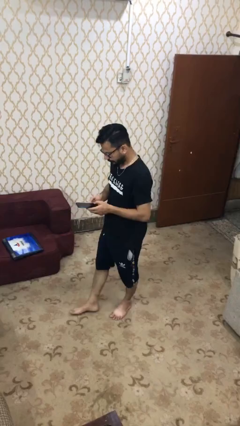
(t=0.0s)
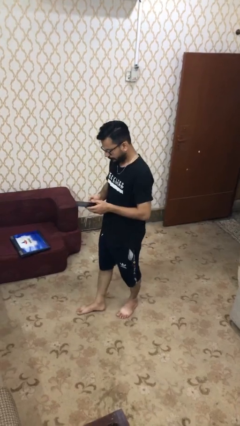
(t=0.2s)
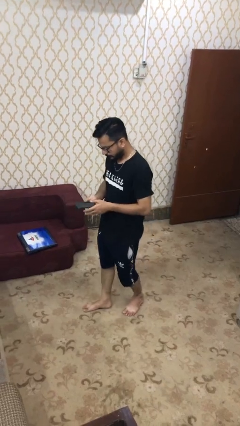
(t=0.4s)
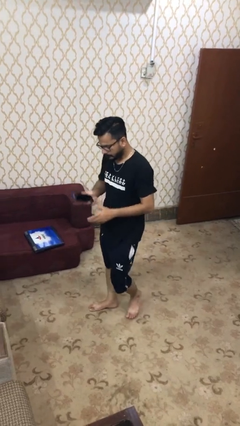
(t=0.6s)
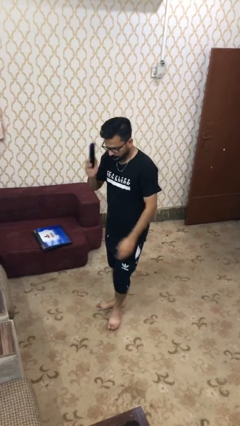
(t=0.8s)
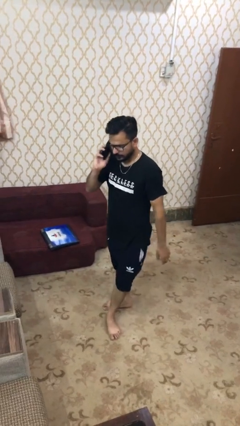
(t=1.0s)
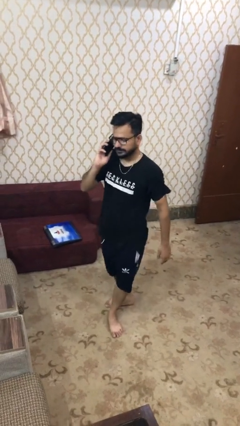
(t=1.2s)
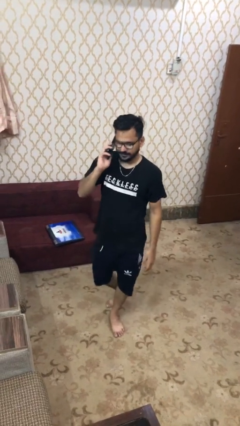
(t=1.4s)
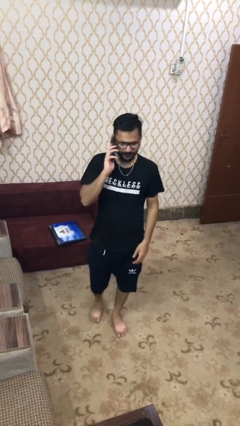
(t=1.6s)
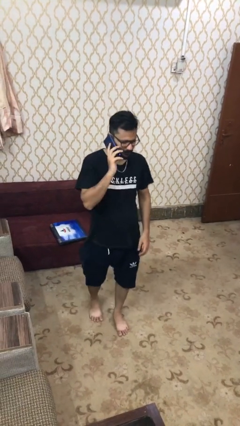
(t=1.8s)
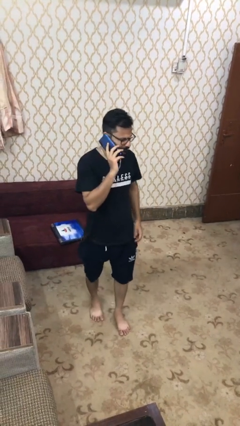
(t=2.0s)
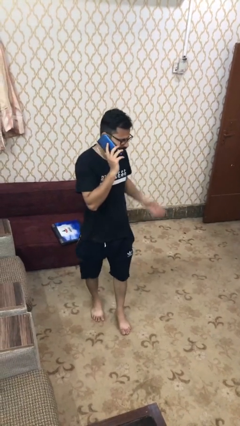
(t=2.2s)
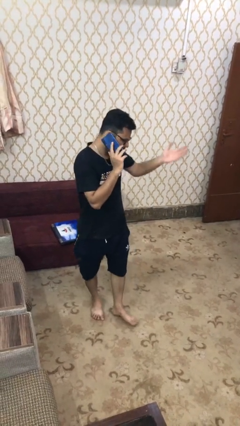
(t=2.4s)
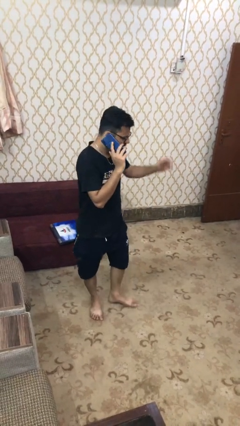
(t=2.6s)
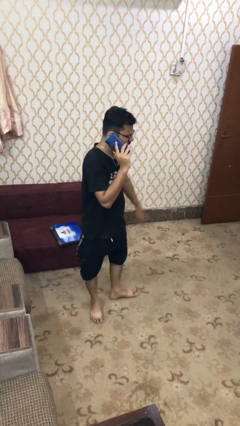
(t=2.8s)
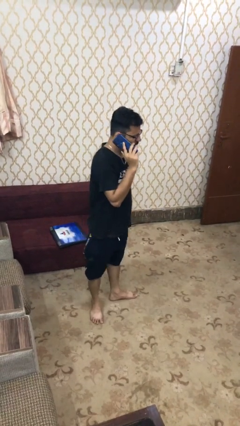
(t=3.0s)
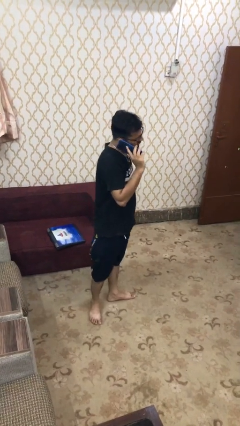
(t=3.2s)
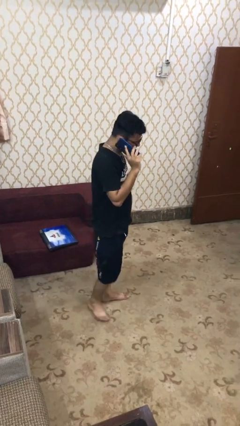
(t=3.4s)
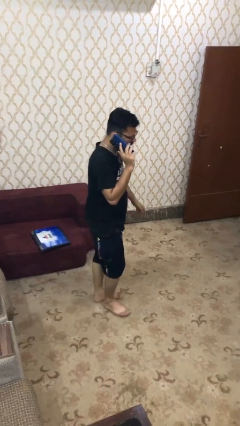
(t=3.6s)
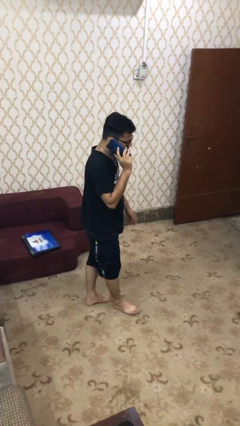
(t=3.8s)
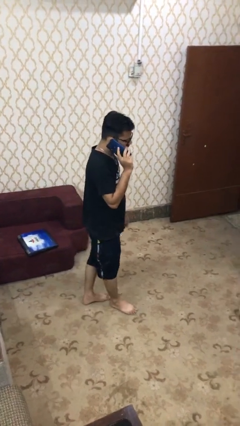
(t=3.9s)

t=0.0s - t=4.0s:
person talks on phone

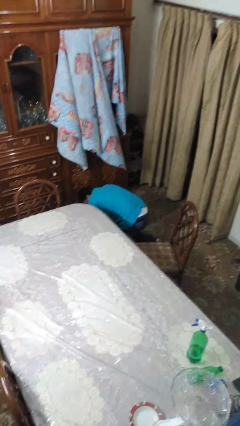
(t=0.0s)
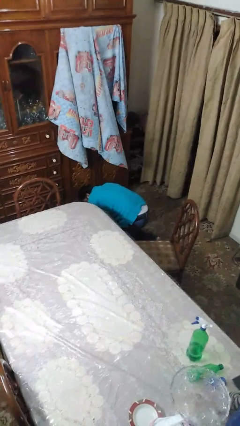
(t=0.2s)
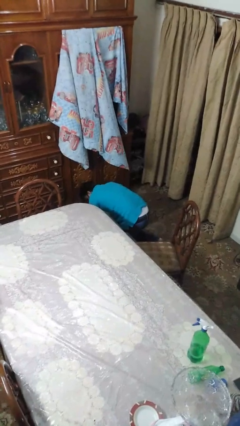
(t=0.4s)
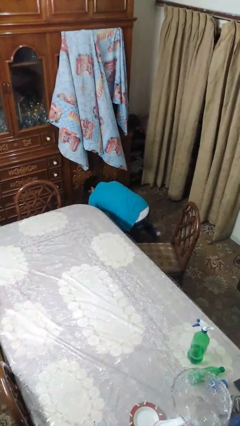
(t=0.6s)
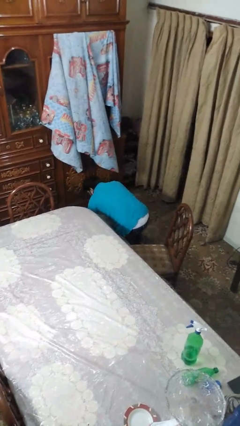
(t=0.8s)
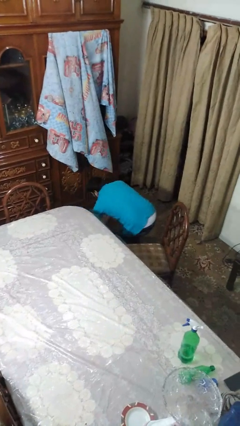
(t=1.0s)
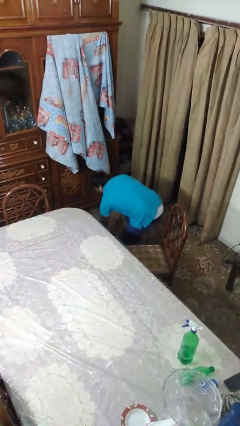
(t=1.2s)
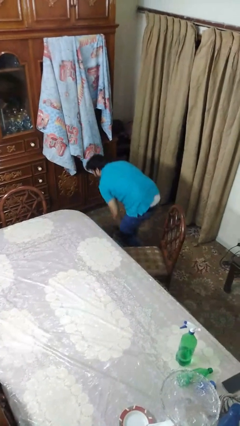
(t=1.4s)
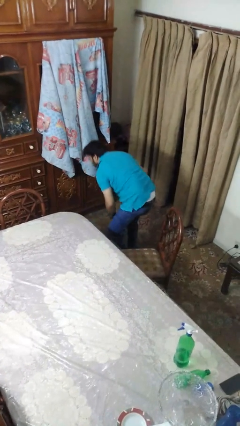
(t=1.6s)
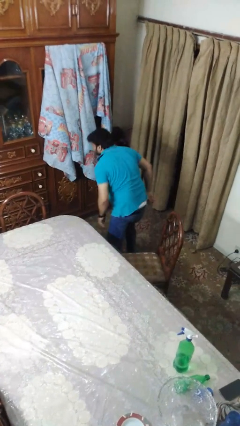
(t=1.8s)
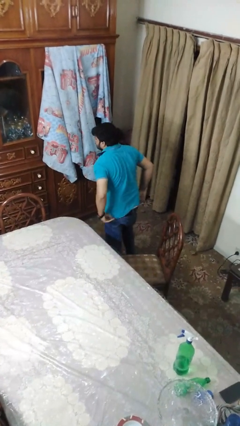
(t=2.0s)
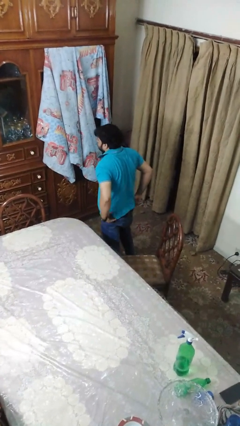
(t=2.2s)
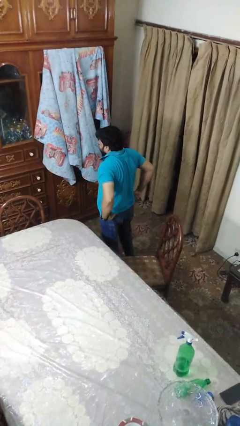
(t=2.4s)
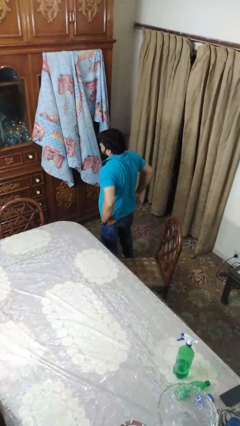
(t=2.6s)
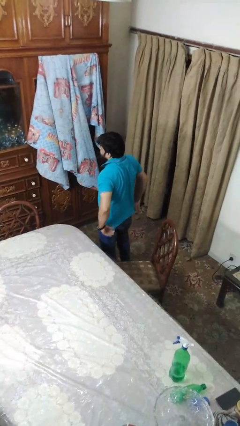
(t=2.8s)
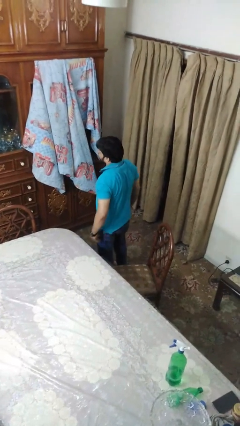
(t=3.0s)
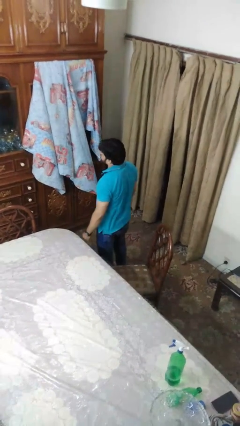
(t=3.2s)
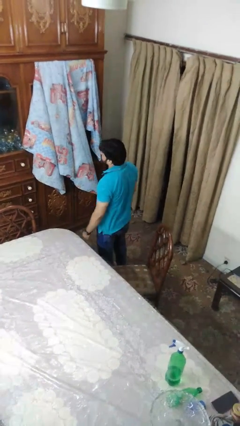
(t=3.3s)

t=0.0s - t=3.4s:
person stands up from floor

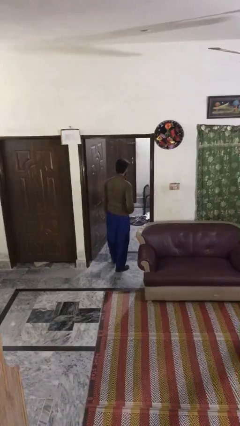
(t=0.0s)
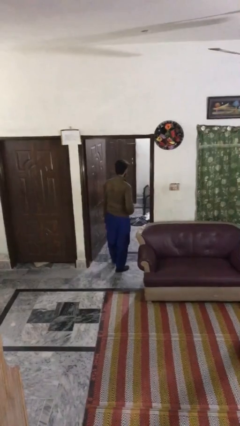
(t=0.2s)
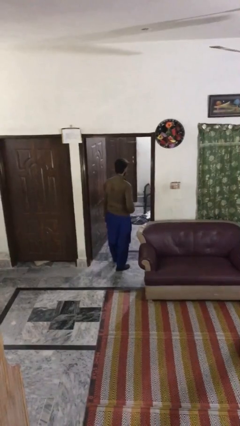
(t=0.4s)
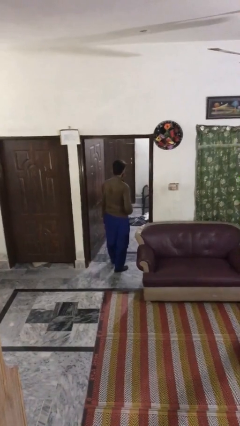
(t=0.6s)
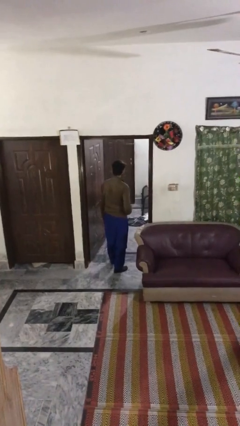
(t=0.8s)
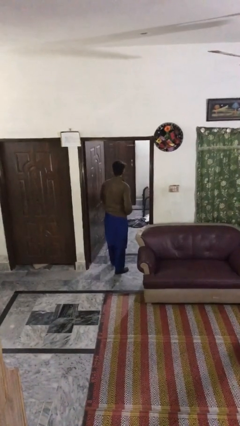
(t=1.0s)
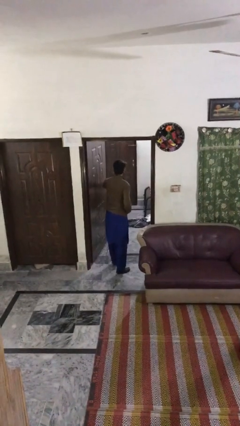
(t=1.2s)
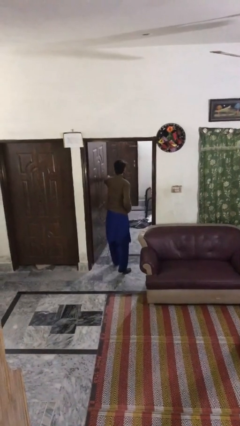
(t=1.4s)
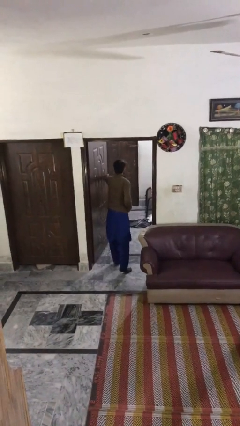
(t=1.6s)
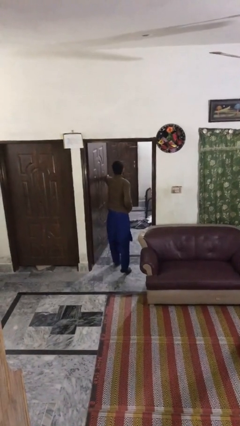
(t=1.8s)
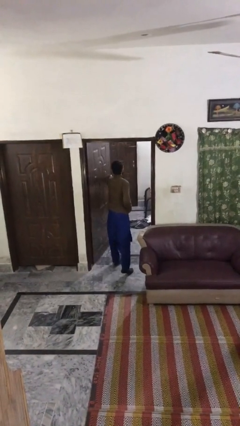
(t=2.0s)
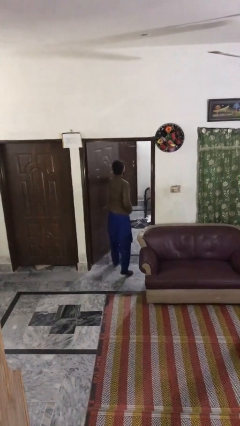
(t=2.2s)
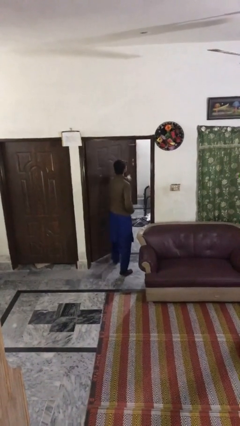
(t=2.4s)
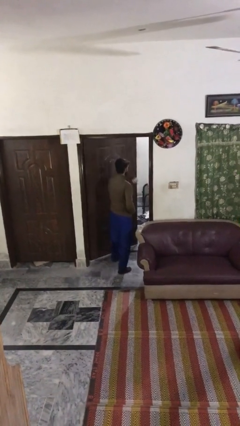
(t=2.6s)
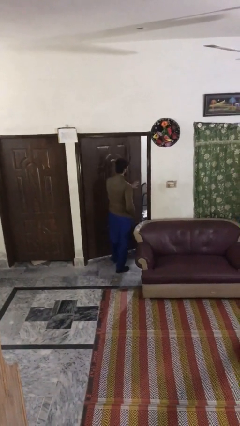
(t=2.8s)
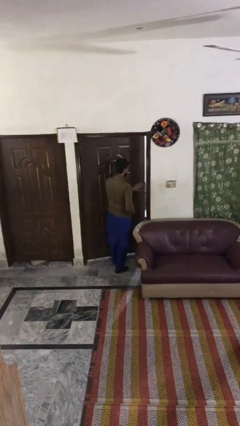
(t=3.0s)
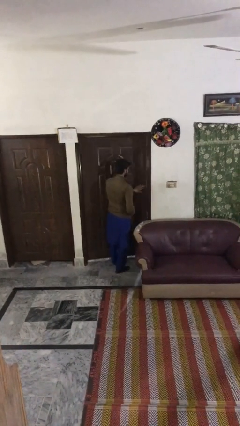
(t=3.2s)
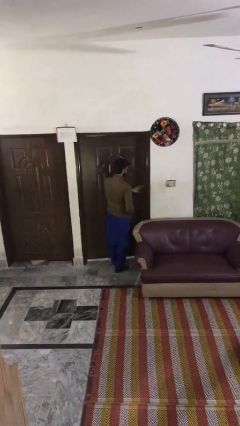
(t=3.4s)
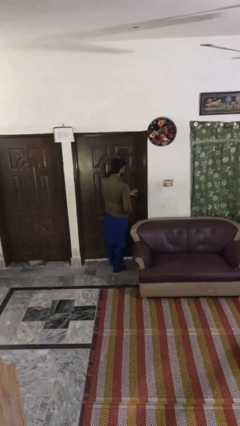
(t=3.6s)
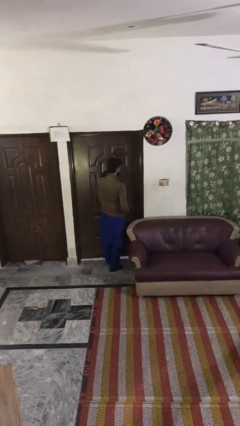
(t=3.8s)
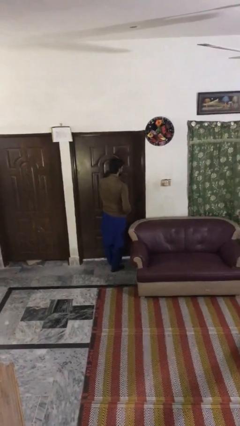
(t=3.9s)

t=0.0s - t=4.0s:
person closes facility door

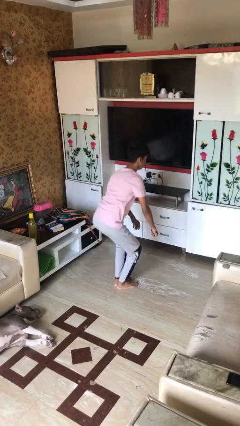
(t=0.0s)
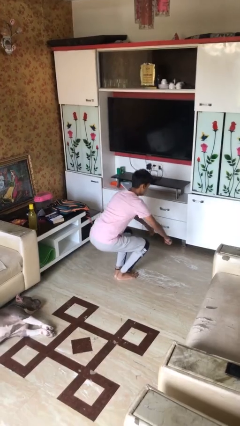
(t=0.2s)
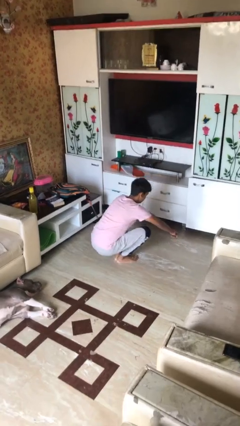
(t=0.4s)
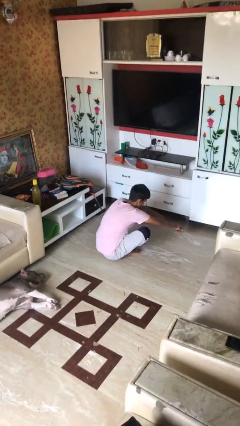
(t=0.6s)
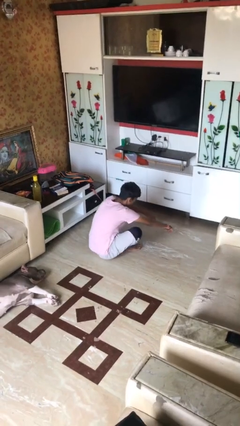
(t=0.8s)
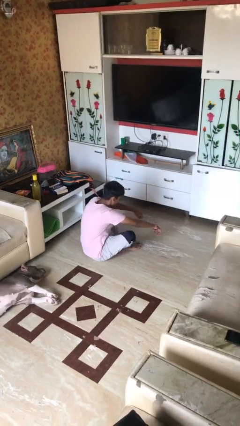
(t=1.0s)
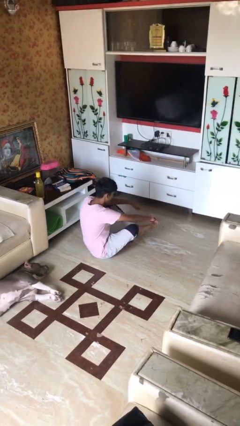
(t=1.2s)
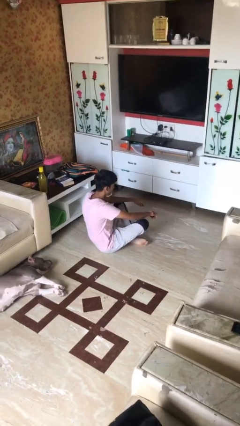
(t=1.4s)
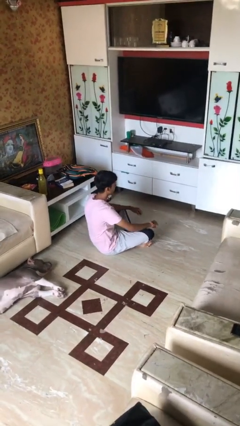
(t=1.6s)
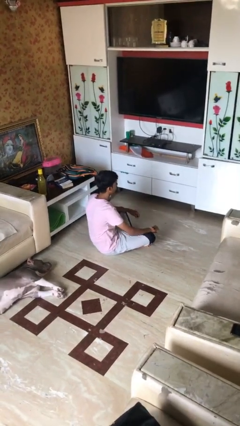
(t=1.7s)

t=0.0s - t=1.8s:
person sits crisscross

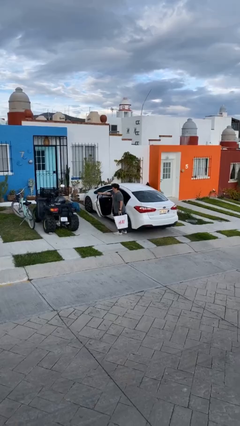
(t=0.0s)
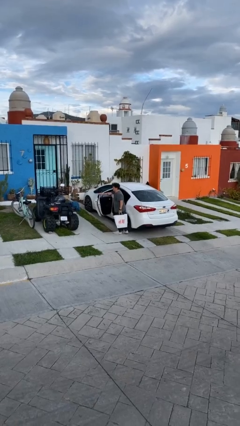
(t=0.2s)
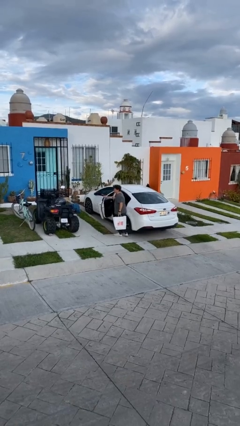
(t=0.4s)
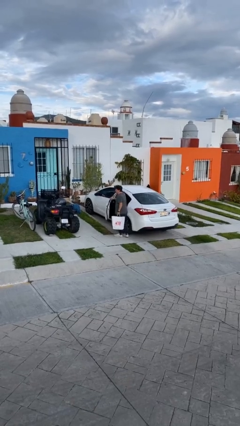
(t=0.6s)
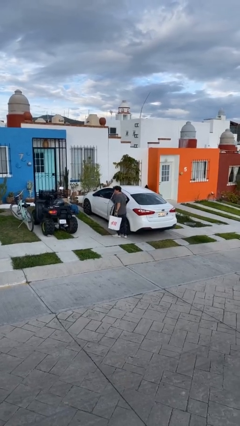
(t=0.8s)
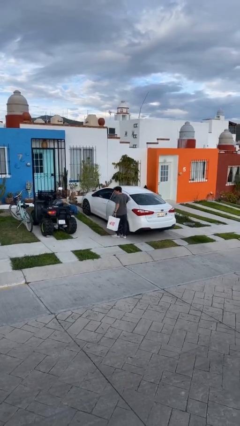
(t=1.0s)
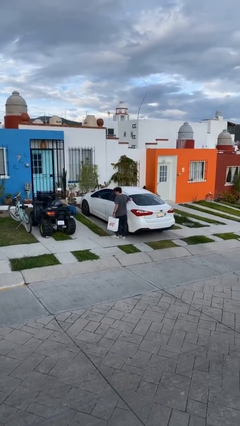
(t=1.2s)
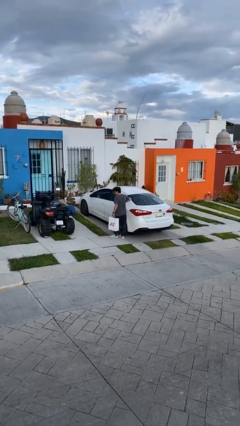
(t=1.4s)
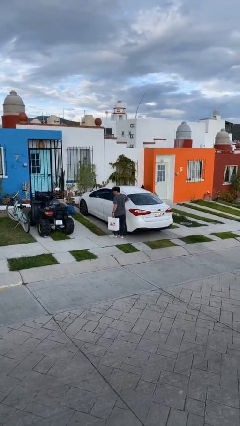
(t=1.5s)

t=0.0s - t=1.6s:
person closes car door

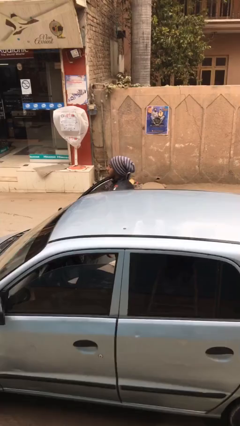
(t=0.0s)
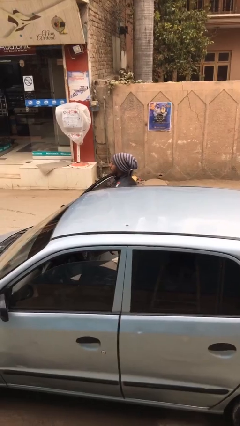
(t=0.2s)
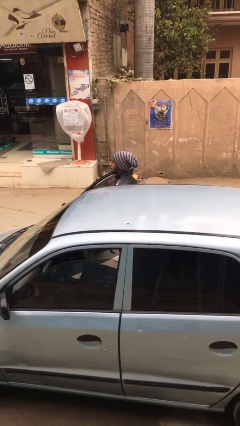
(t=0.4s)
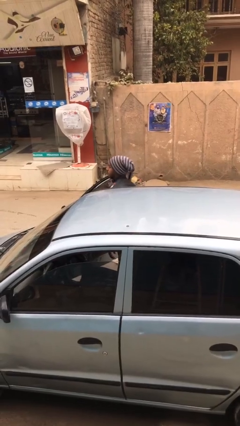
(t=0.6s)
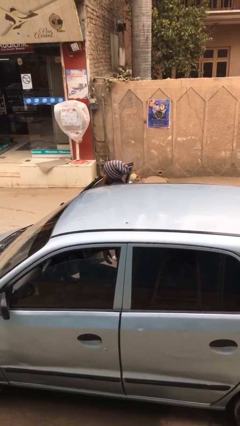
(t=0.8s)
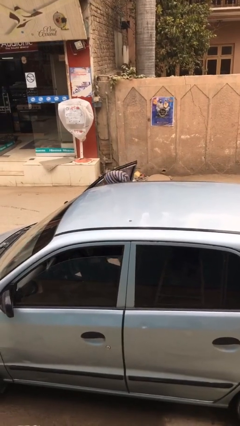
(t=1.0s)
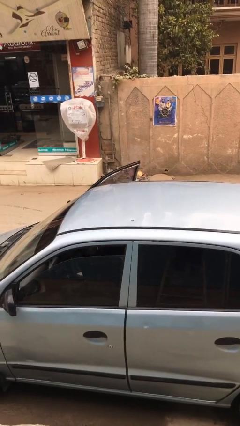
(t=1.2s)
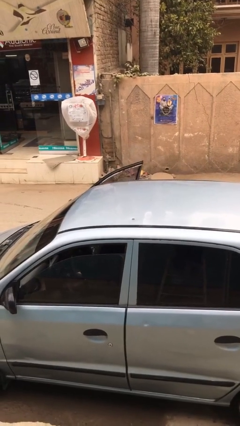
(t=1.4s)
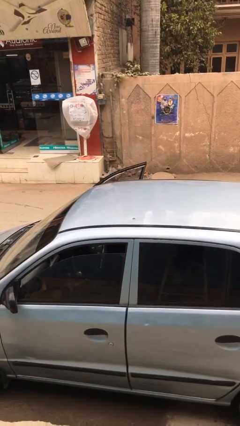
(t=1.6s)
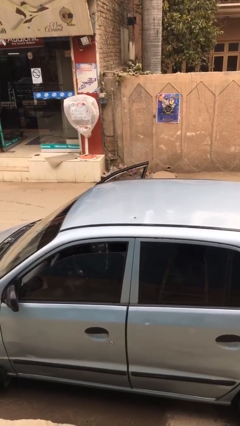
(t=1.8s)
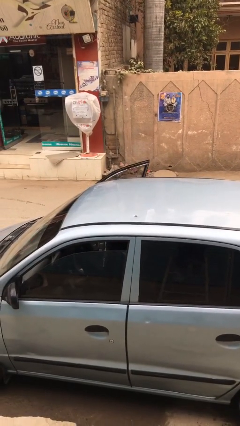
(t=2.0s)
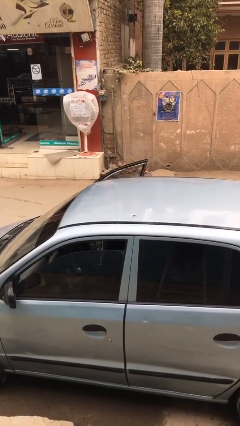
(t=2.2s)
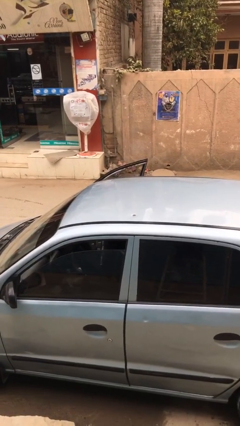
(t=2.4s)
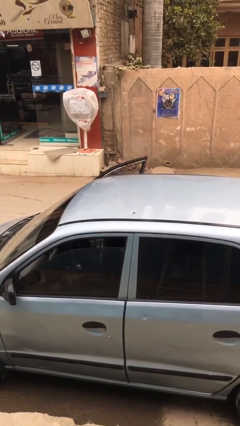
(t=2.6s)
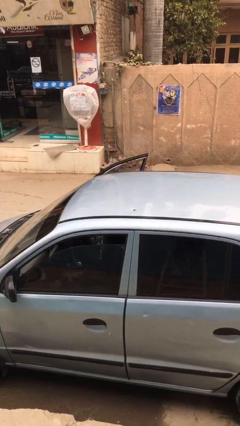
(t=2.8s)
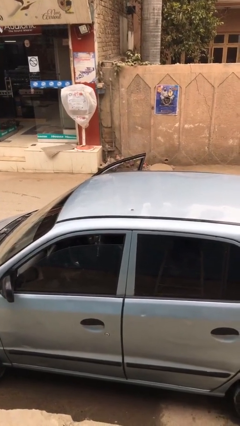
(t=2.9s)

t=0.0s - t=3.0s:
person enters car
